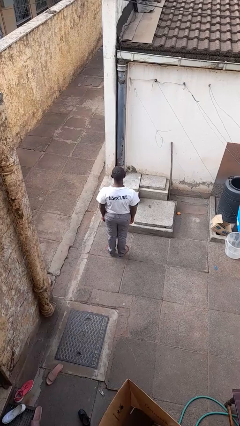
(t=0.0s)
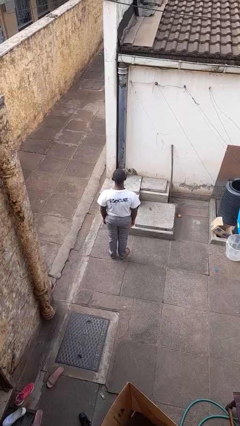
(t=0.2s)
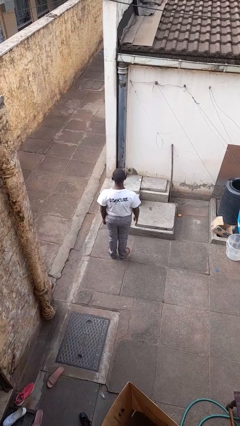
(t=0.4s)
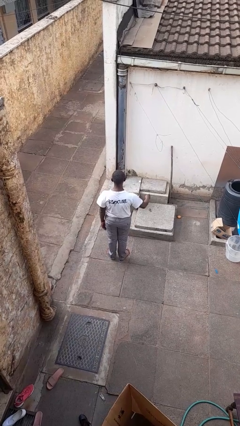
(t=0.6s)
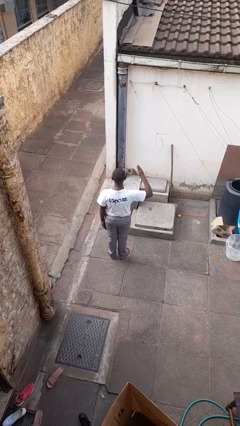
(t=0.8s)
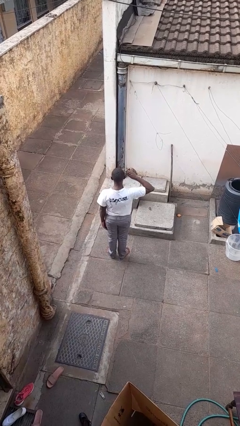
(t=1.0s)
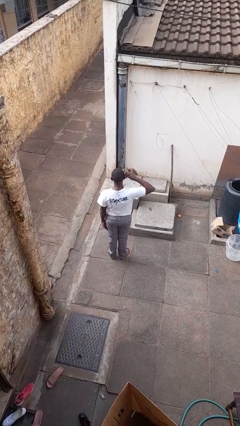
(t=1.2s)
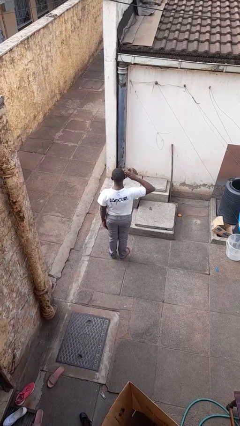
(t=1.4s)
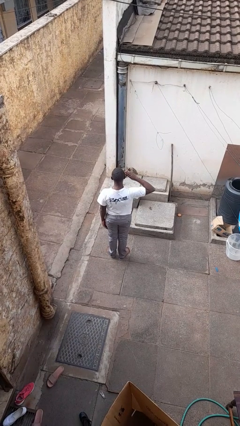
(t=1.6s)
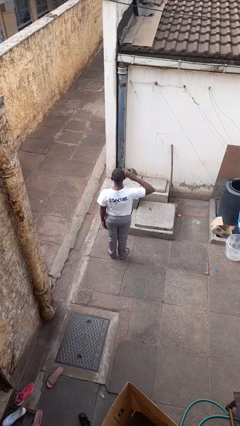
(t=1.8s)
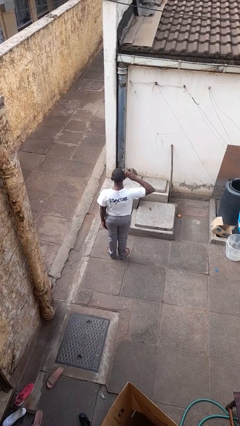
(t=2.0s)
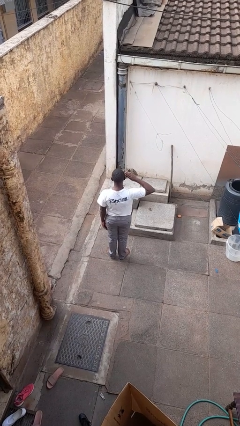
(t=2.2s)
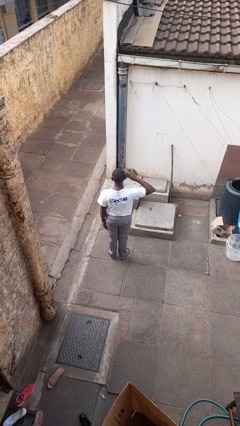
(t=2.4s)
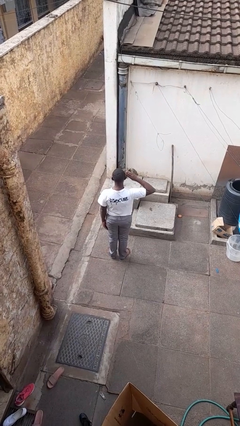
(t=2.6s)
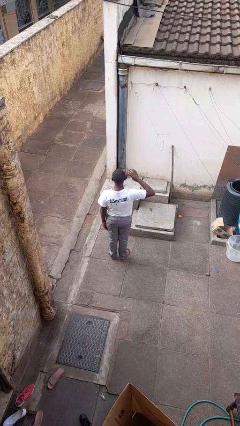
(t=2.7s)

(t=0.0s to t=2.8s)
person salutes

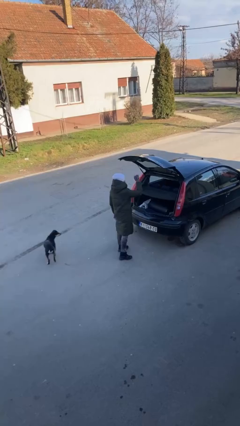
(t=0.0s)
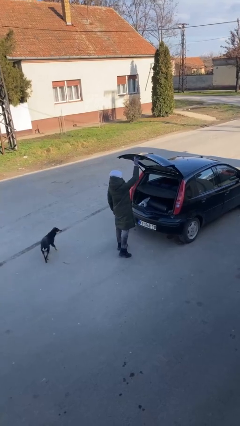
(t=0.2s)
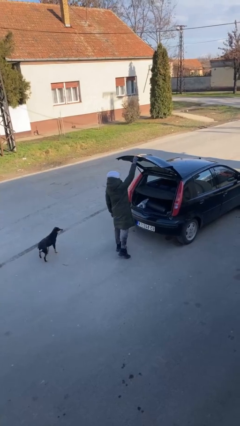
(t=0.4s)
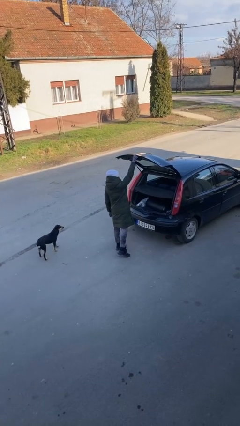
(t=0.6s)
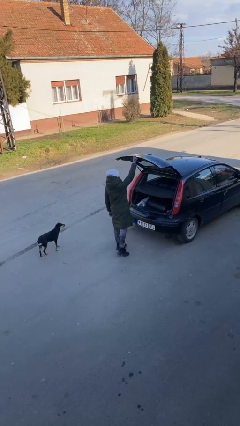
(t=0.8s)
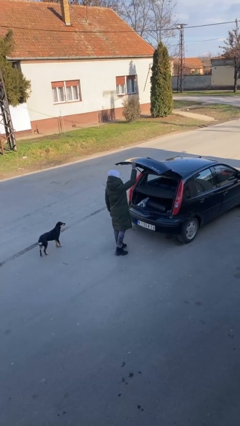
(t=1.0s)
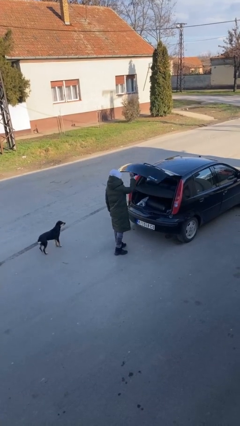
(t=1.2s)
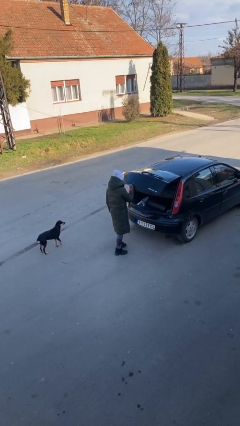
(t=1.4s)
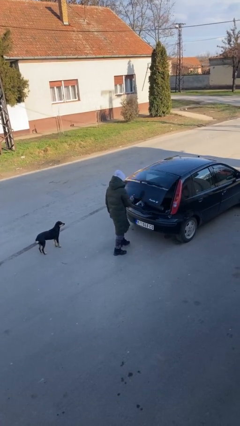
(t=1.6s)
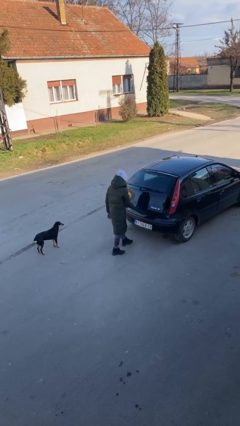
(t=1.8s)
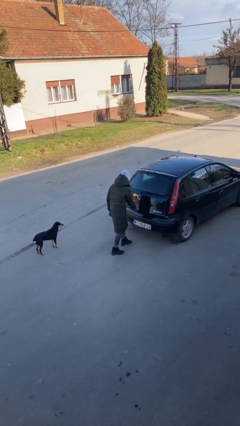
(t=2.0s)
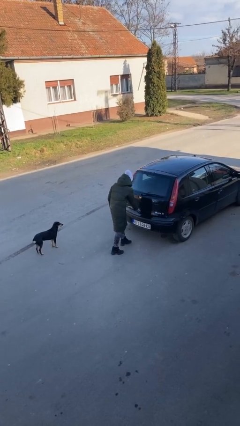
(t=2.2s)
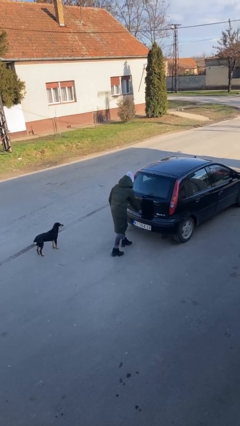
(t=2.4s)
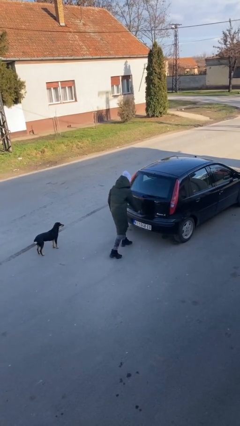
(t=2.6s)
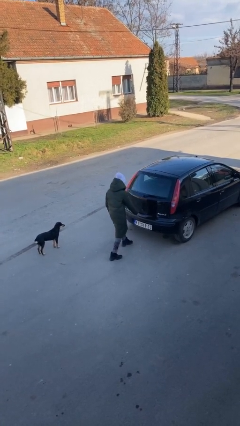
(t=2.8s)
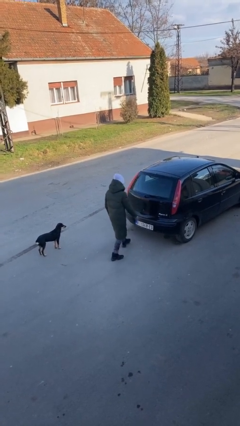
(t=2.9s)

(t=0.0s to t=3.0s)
person closes car trunk

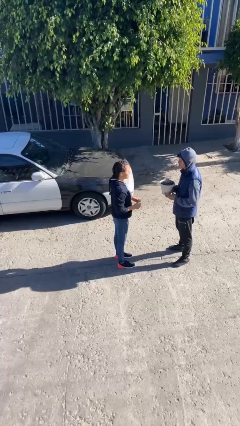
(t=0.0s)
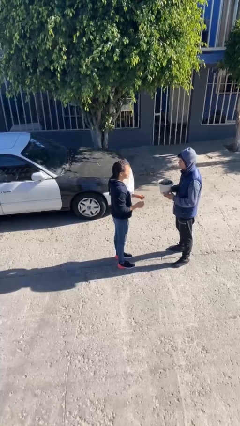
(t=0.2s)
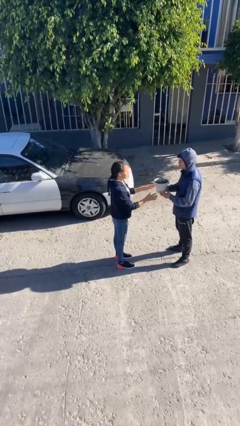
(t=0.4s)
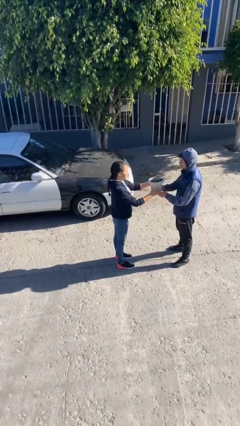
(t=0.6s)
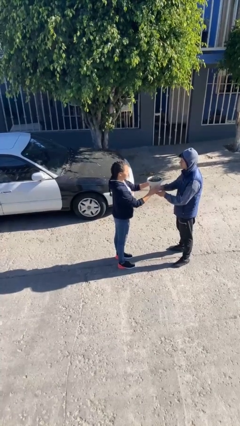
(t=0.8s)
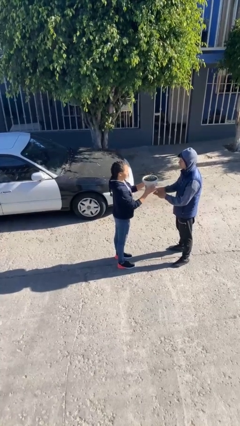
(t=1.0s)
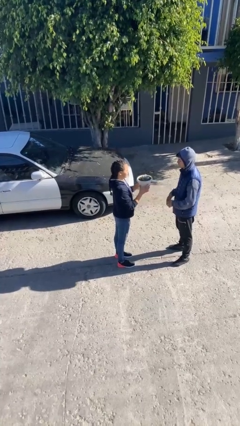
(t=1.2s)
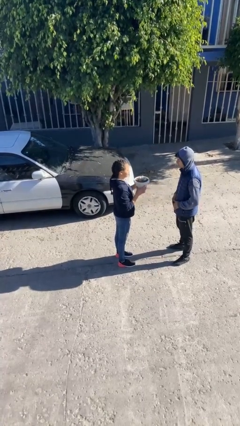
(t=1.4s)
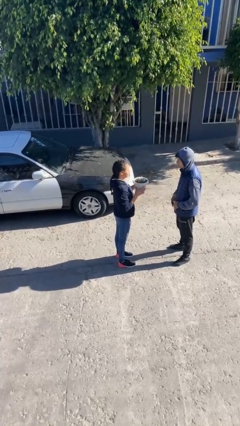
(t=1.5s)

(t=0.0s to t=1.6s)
person transfers object to person

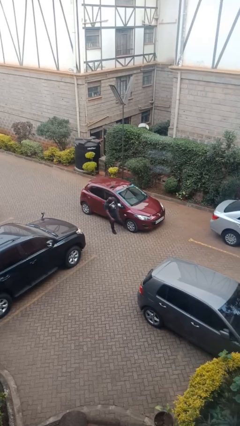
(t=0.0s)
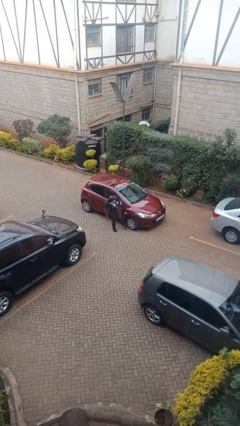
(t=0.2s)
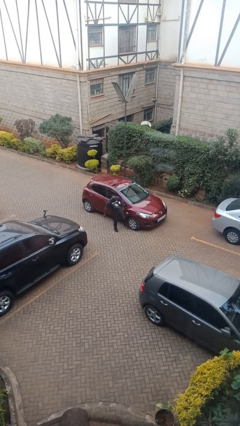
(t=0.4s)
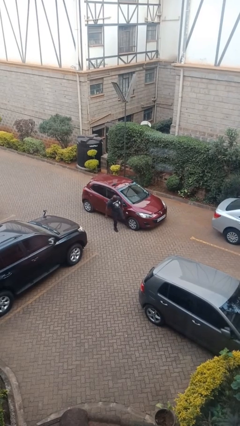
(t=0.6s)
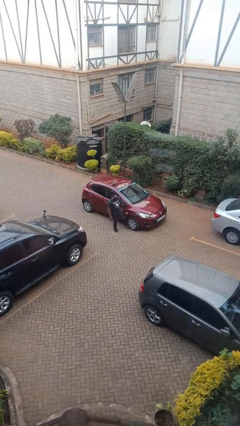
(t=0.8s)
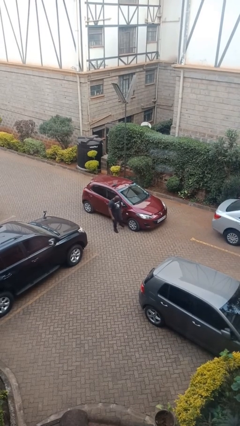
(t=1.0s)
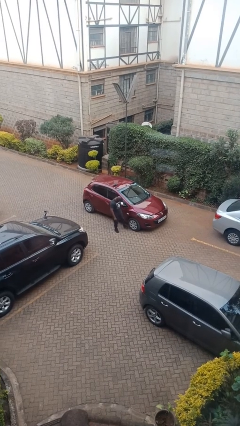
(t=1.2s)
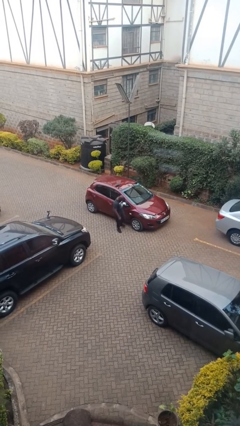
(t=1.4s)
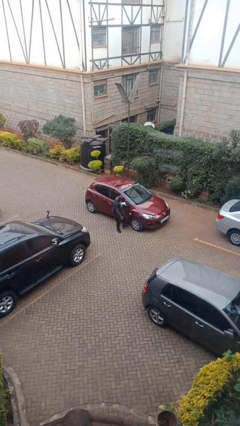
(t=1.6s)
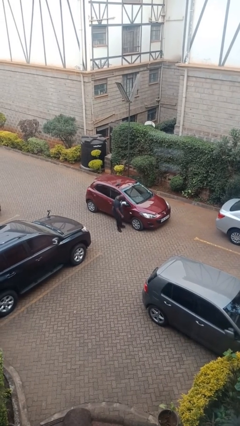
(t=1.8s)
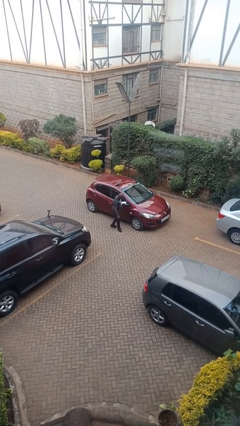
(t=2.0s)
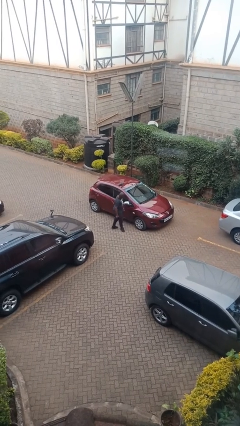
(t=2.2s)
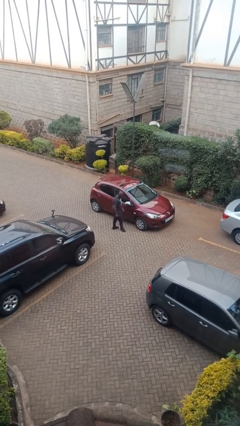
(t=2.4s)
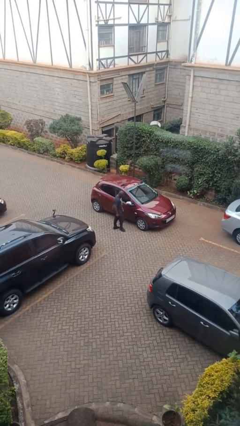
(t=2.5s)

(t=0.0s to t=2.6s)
person kicks car tires

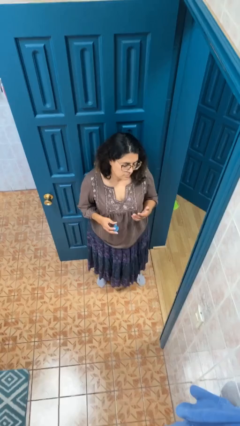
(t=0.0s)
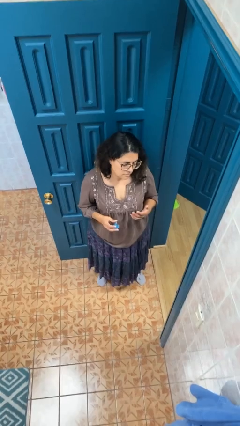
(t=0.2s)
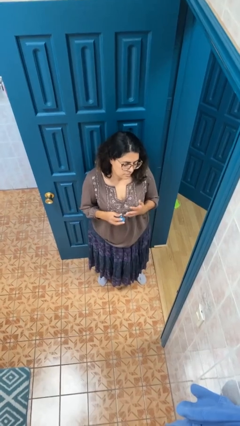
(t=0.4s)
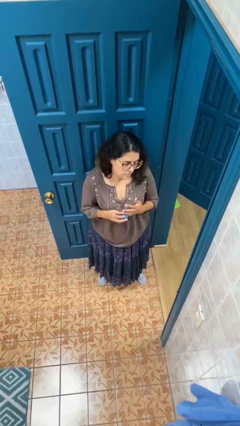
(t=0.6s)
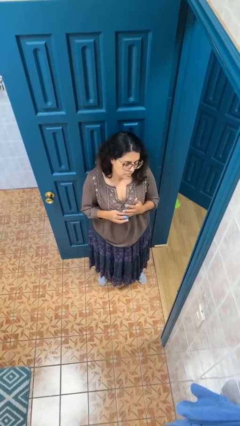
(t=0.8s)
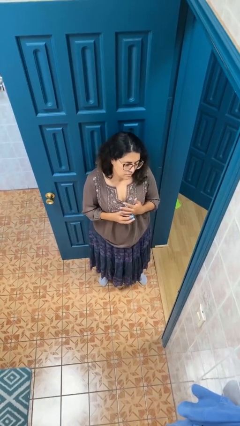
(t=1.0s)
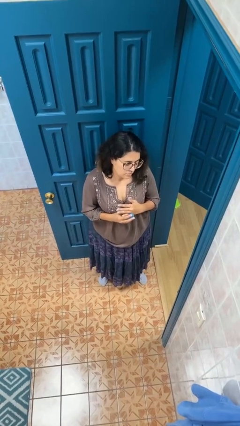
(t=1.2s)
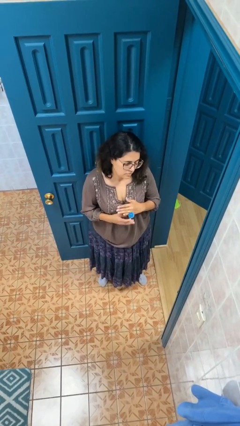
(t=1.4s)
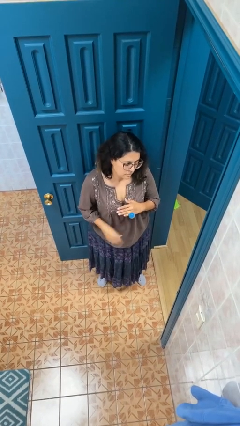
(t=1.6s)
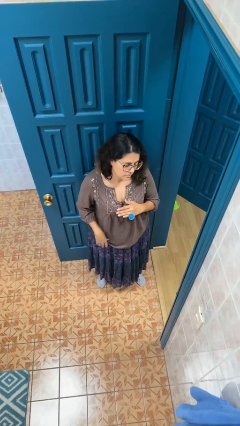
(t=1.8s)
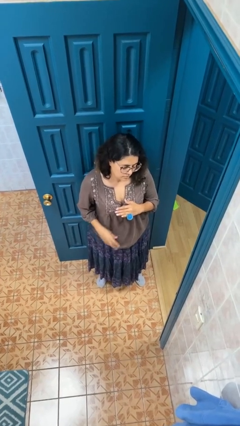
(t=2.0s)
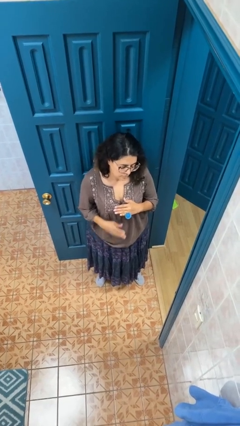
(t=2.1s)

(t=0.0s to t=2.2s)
person puts on ring

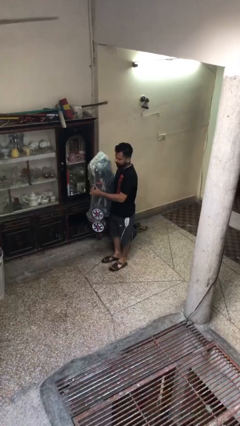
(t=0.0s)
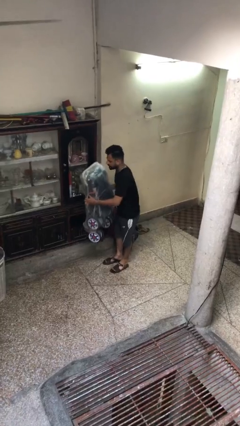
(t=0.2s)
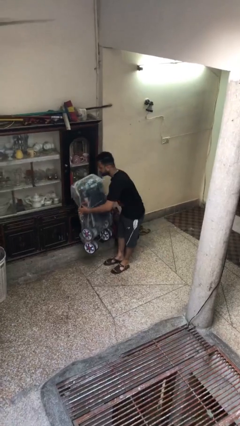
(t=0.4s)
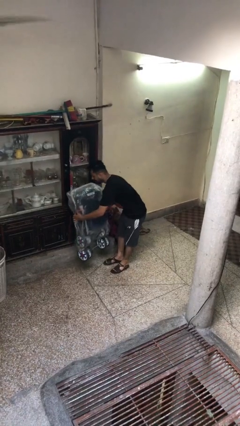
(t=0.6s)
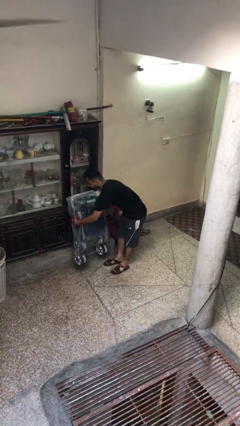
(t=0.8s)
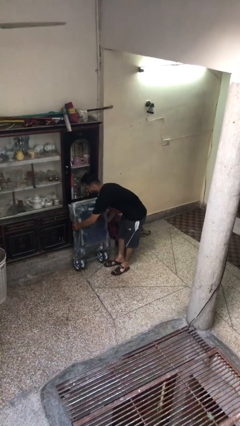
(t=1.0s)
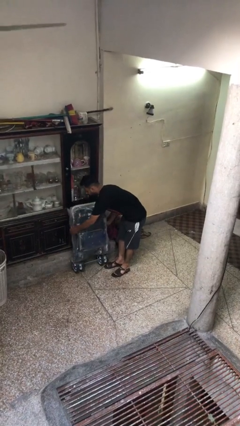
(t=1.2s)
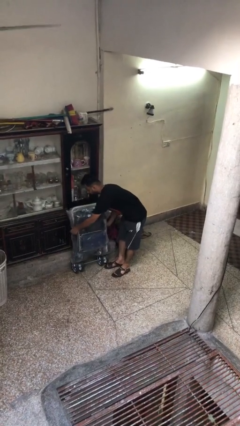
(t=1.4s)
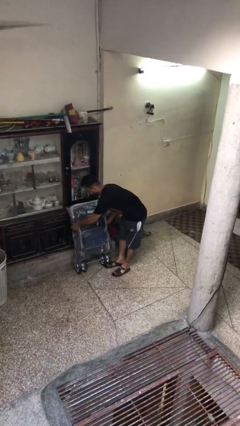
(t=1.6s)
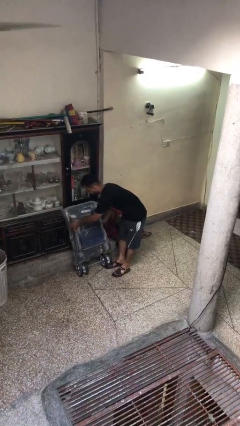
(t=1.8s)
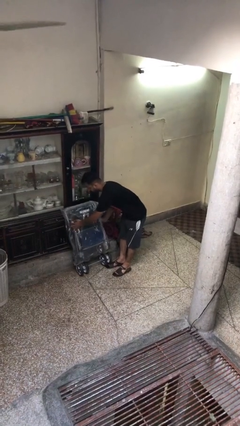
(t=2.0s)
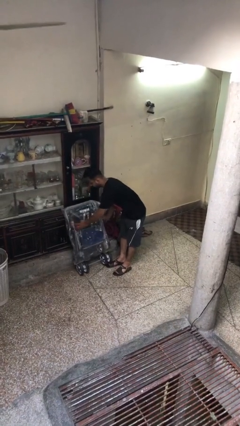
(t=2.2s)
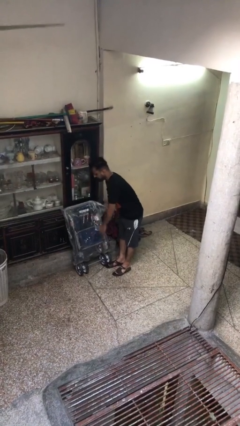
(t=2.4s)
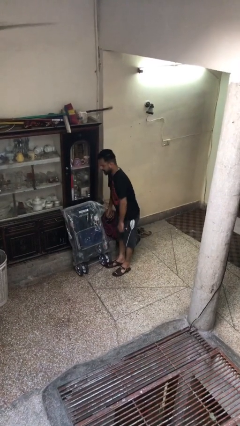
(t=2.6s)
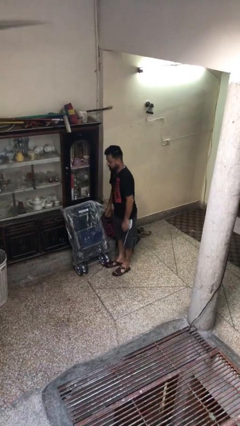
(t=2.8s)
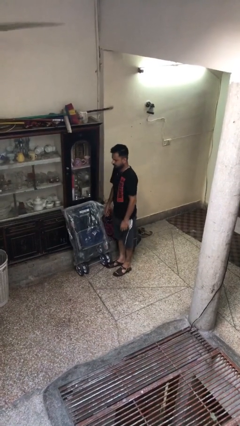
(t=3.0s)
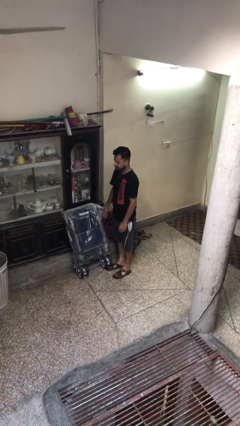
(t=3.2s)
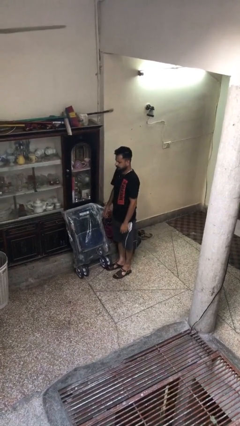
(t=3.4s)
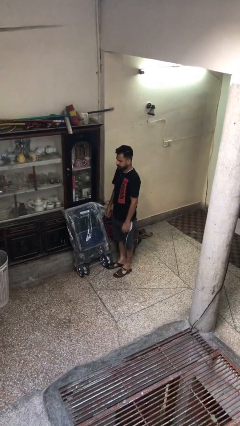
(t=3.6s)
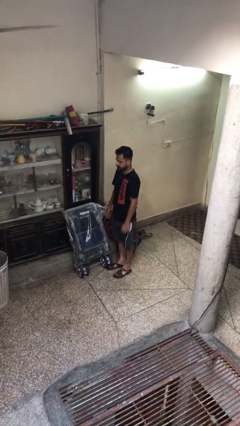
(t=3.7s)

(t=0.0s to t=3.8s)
person puts down object on floor

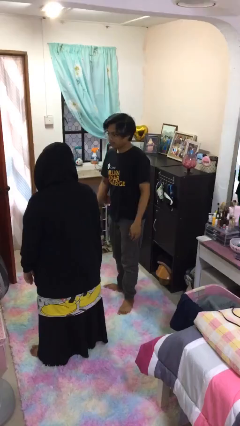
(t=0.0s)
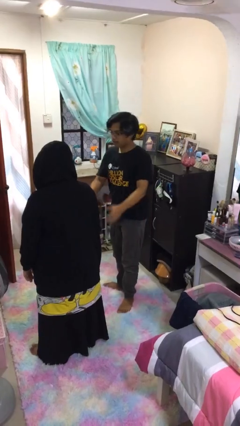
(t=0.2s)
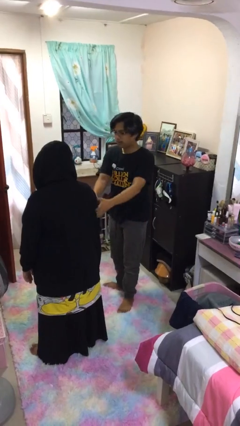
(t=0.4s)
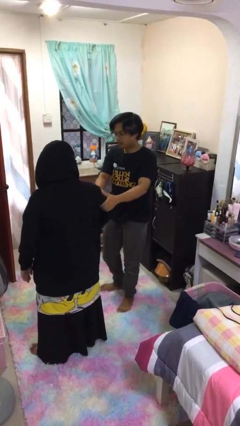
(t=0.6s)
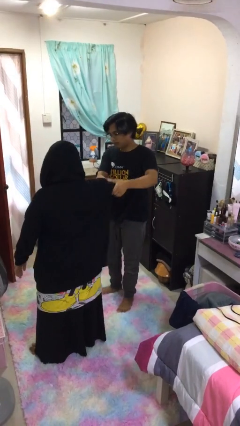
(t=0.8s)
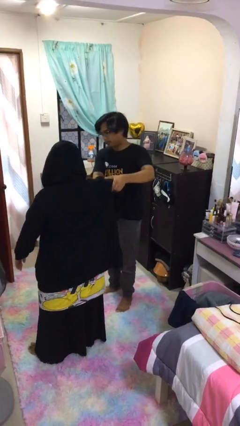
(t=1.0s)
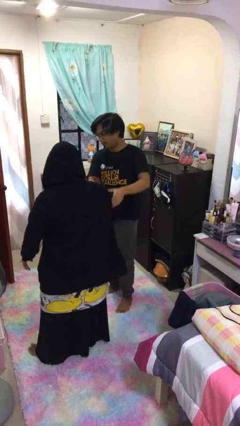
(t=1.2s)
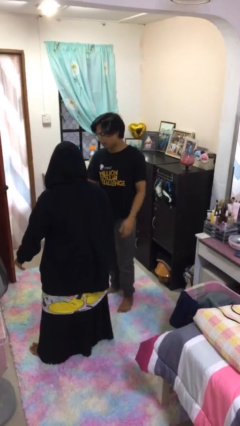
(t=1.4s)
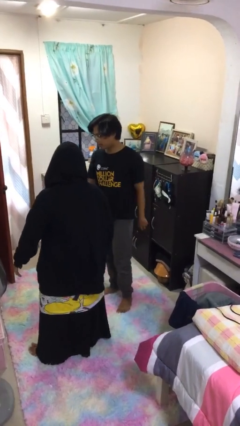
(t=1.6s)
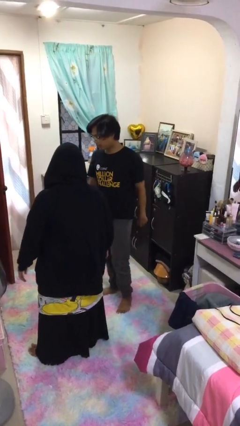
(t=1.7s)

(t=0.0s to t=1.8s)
person grabs person by bicep
